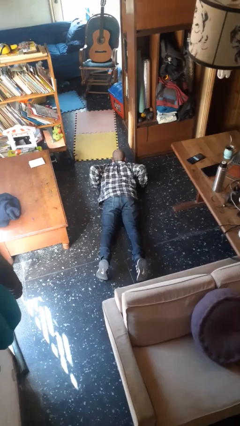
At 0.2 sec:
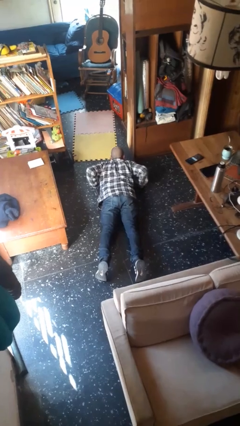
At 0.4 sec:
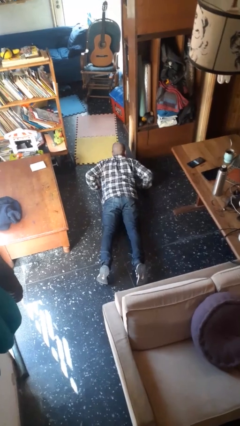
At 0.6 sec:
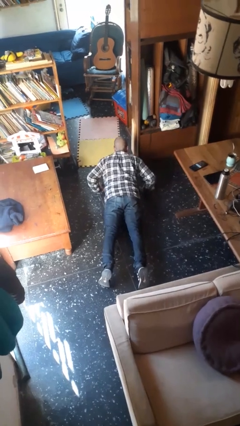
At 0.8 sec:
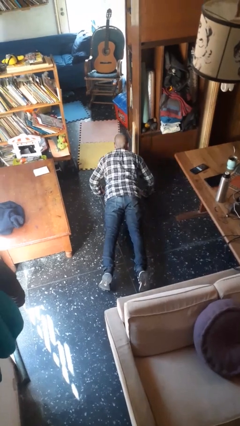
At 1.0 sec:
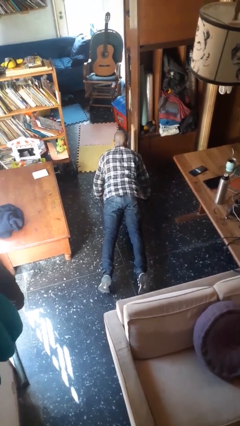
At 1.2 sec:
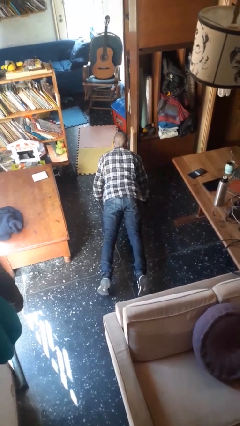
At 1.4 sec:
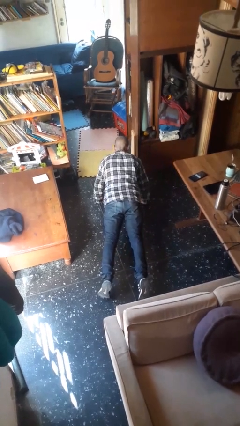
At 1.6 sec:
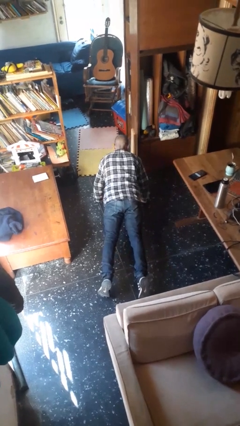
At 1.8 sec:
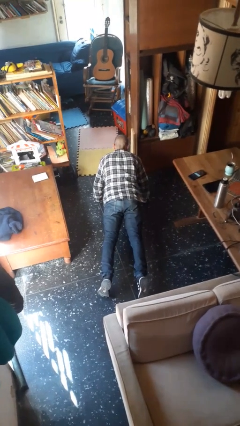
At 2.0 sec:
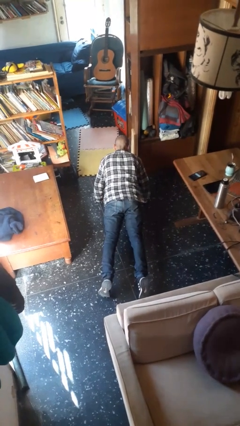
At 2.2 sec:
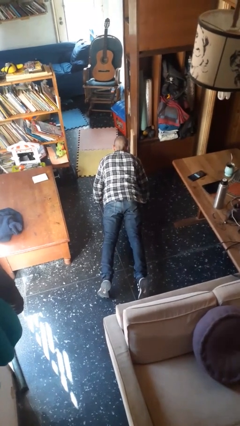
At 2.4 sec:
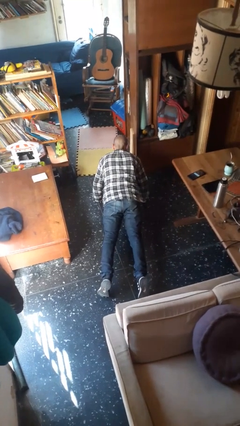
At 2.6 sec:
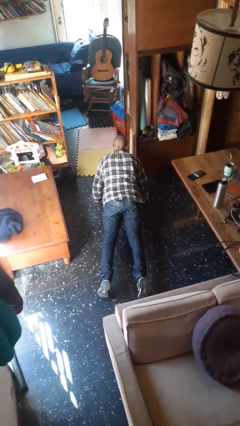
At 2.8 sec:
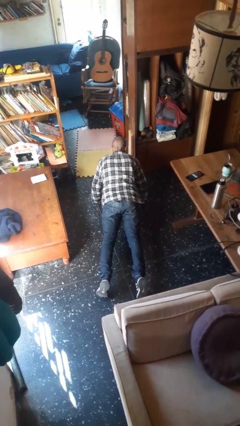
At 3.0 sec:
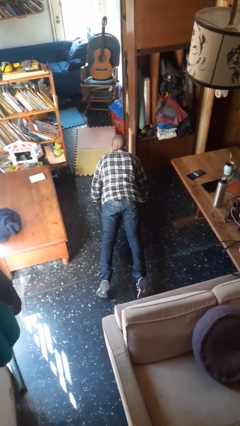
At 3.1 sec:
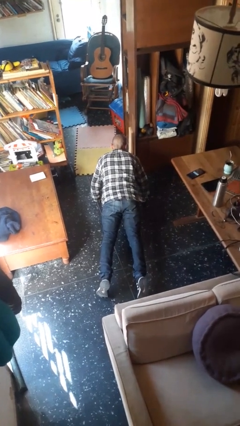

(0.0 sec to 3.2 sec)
person exercises with pushup

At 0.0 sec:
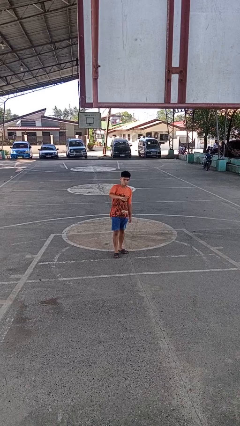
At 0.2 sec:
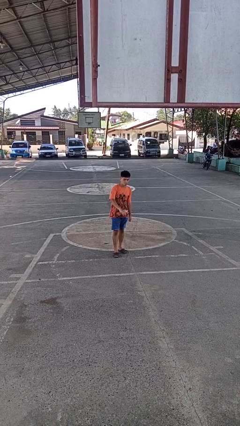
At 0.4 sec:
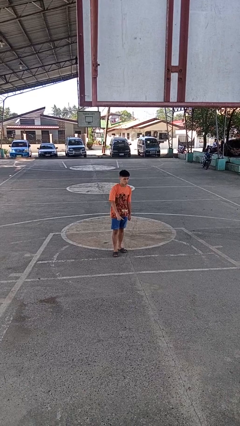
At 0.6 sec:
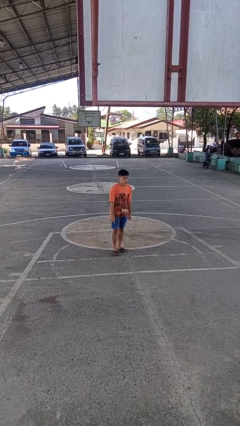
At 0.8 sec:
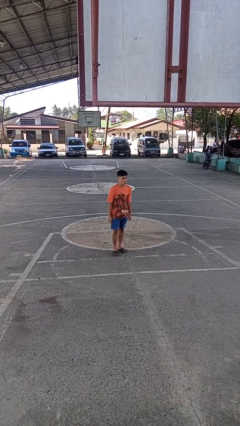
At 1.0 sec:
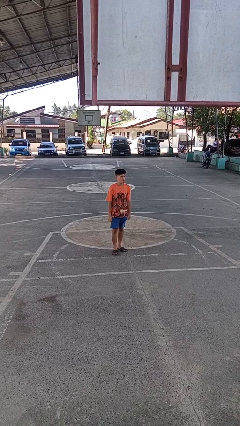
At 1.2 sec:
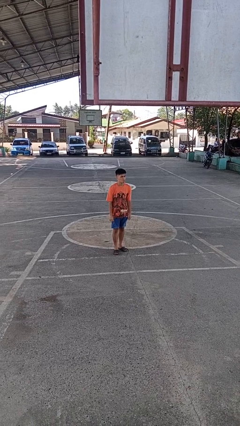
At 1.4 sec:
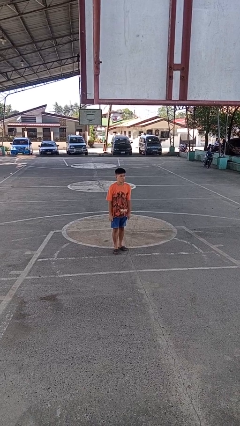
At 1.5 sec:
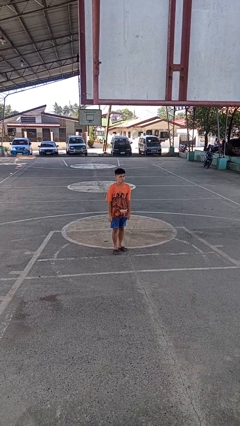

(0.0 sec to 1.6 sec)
person gestures swipe down

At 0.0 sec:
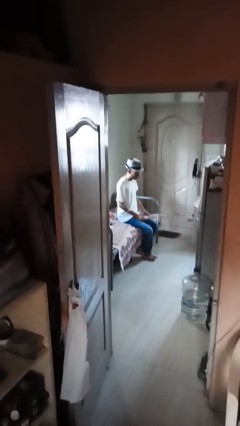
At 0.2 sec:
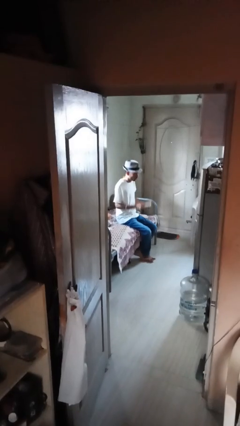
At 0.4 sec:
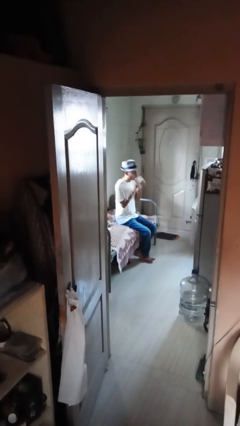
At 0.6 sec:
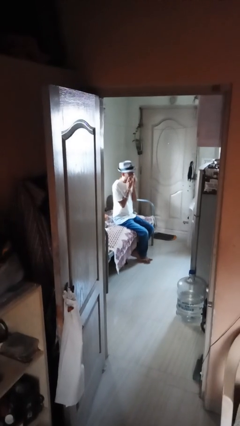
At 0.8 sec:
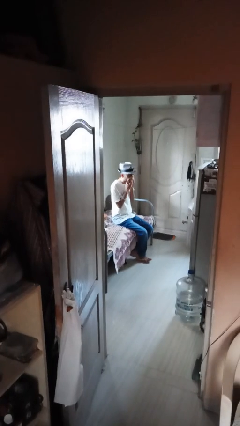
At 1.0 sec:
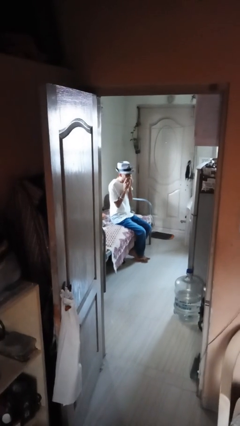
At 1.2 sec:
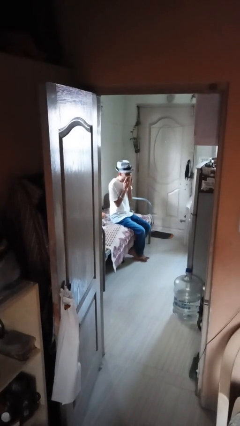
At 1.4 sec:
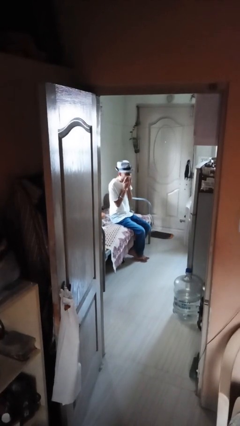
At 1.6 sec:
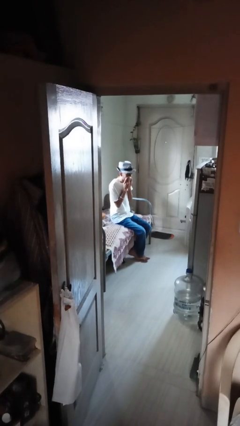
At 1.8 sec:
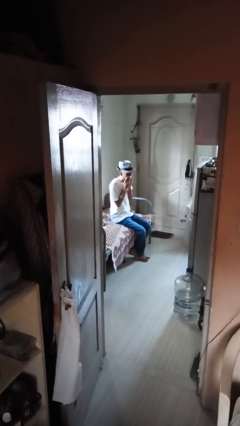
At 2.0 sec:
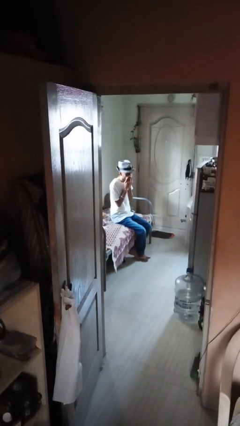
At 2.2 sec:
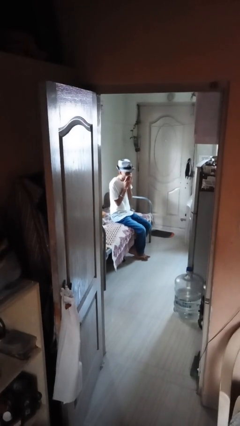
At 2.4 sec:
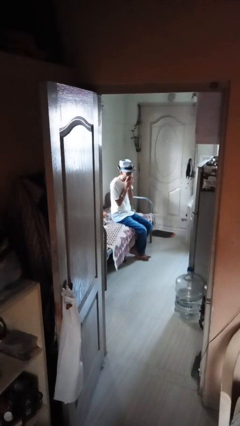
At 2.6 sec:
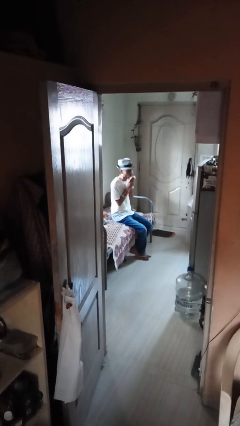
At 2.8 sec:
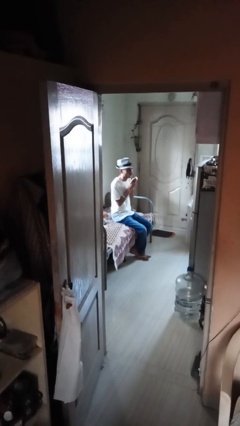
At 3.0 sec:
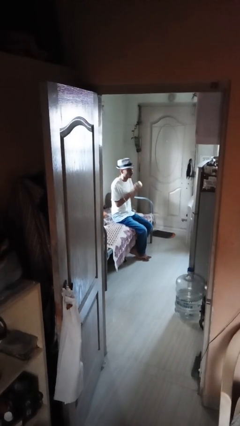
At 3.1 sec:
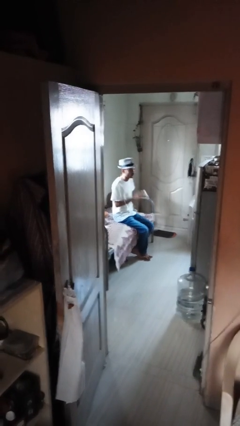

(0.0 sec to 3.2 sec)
person blows nose

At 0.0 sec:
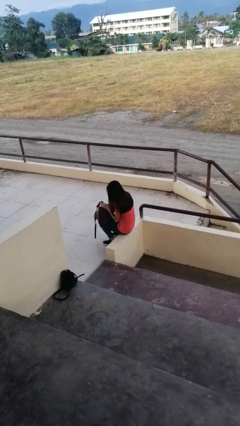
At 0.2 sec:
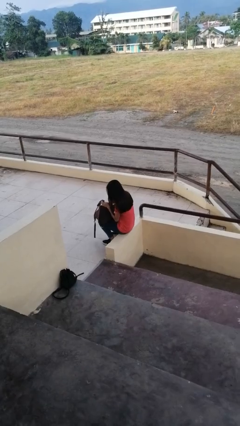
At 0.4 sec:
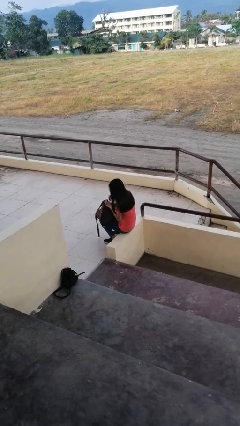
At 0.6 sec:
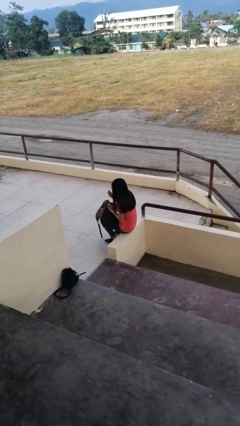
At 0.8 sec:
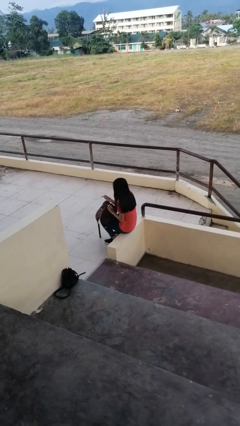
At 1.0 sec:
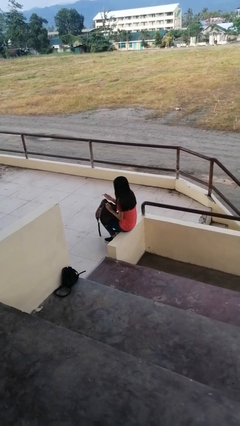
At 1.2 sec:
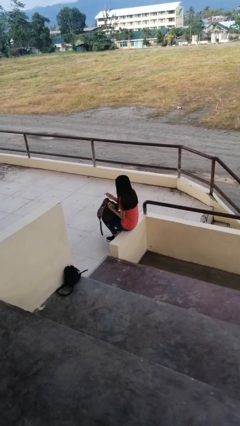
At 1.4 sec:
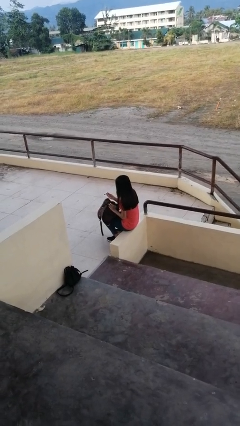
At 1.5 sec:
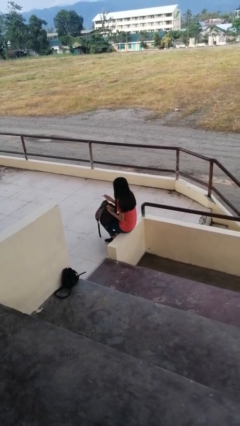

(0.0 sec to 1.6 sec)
person takes object from backpack

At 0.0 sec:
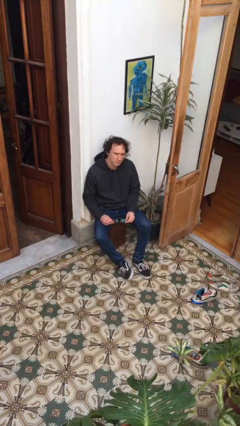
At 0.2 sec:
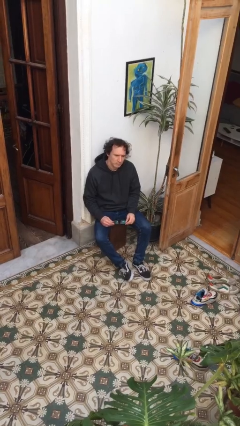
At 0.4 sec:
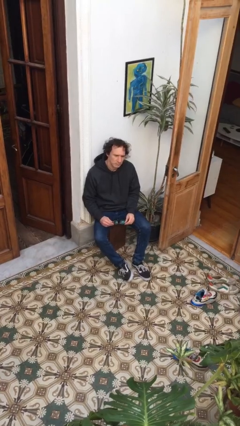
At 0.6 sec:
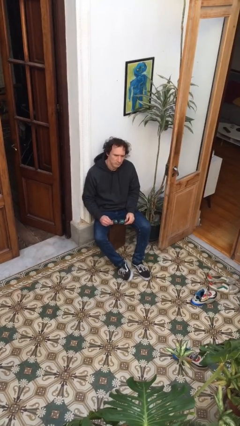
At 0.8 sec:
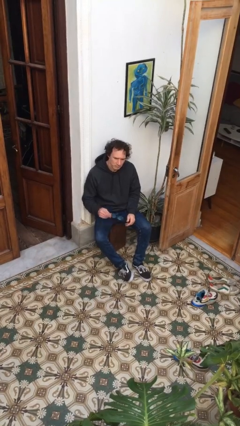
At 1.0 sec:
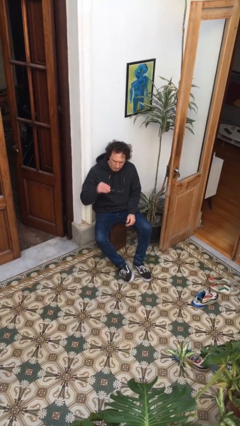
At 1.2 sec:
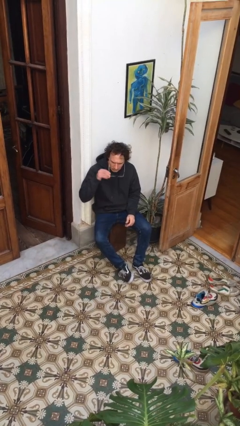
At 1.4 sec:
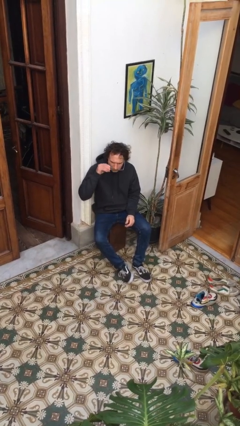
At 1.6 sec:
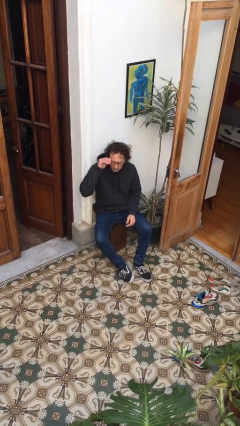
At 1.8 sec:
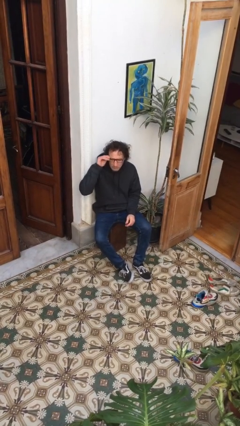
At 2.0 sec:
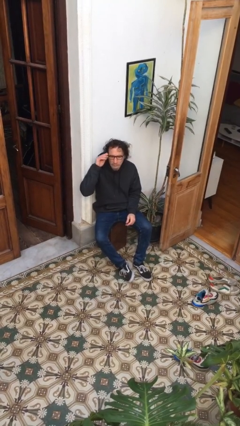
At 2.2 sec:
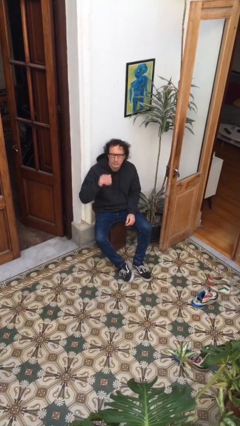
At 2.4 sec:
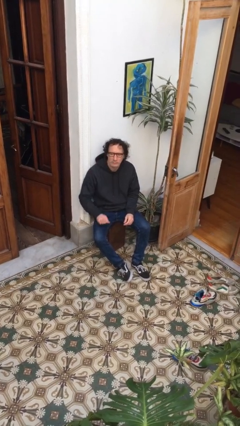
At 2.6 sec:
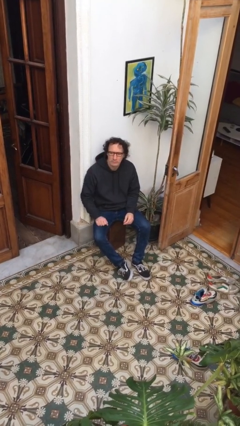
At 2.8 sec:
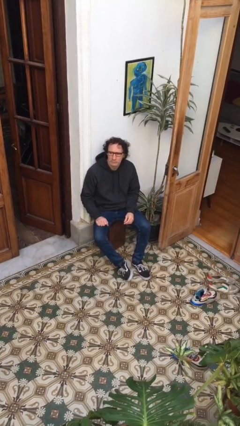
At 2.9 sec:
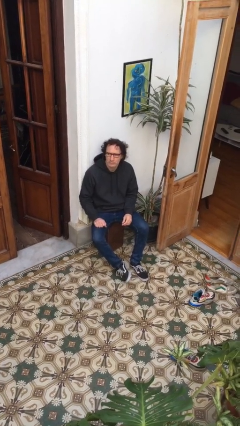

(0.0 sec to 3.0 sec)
person puts on glasses

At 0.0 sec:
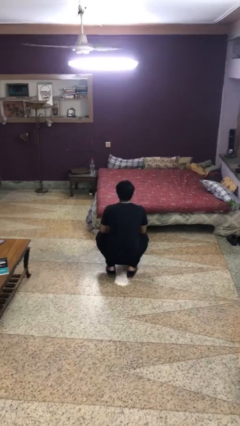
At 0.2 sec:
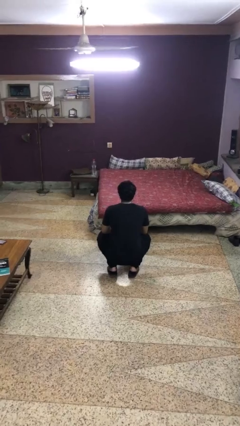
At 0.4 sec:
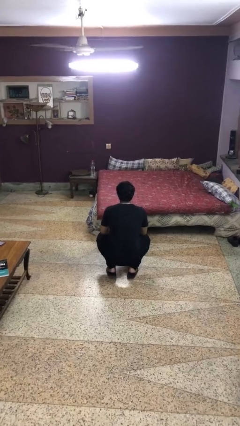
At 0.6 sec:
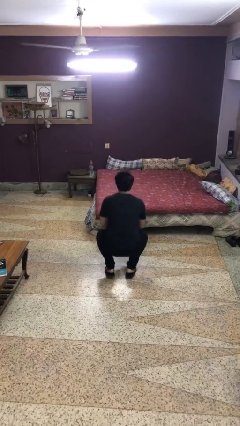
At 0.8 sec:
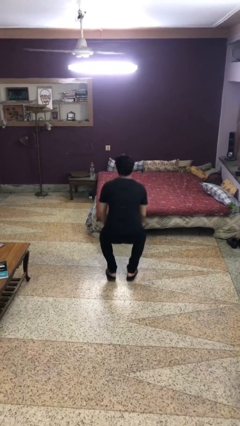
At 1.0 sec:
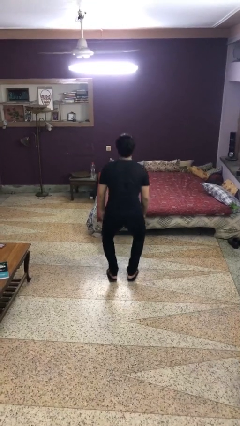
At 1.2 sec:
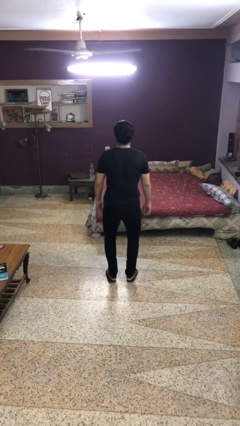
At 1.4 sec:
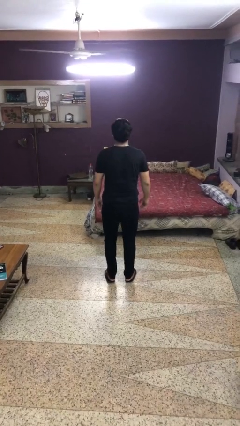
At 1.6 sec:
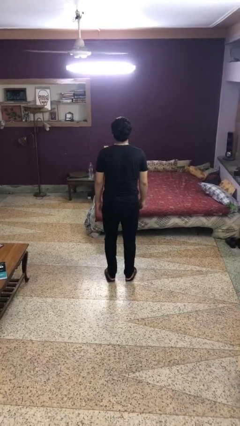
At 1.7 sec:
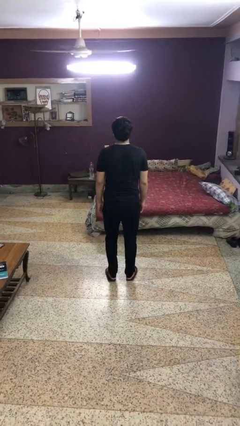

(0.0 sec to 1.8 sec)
person exercises with situp

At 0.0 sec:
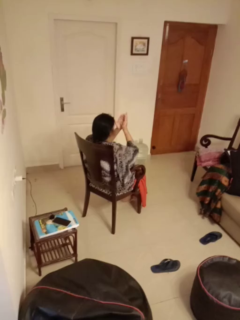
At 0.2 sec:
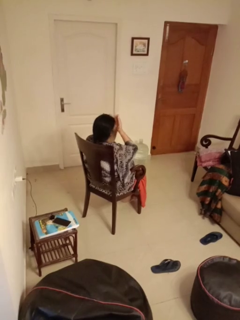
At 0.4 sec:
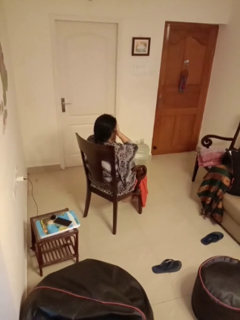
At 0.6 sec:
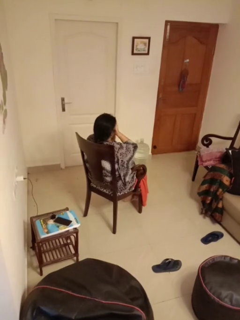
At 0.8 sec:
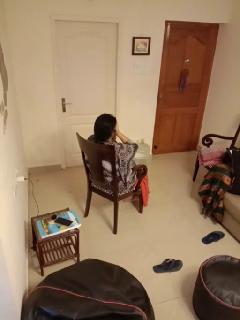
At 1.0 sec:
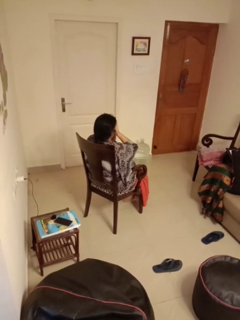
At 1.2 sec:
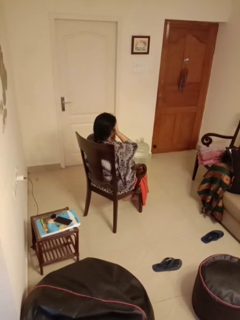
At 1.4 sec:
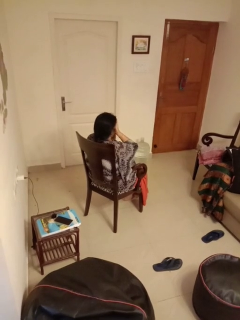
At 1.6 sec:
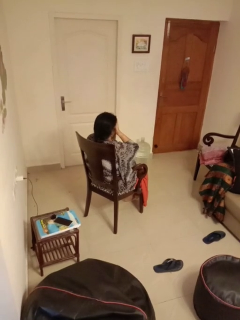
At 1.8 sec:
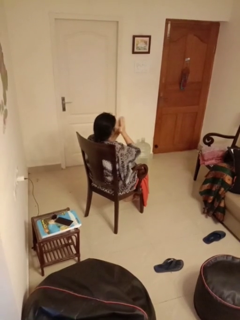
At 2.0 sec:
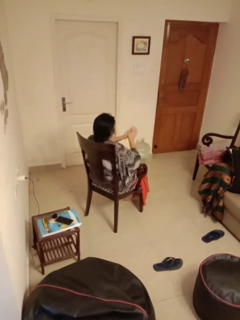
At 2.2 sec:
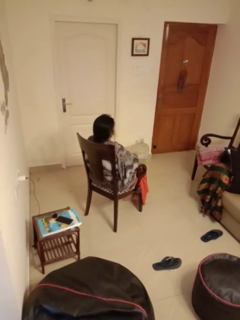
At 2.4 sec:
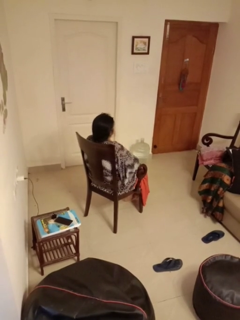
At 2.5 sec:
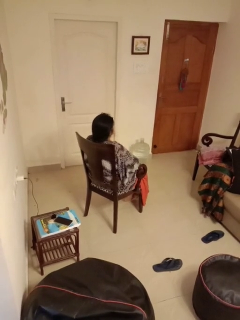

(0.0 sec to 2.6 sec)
person covers face with hands

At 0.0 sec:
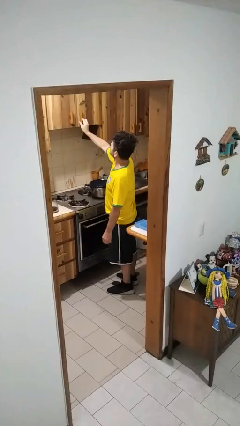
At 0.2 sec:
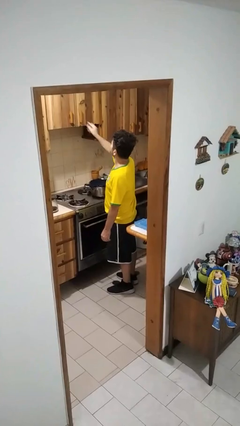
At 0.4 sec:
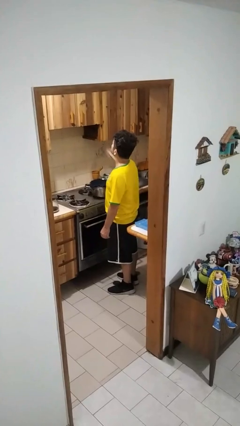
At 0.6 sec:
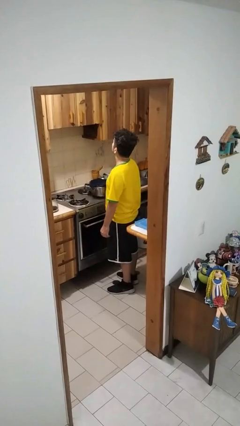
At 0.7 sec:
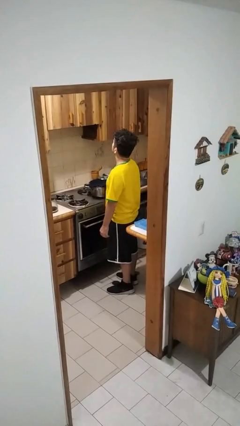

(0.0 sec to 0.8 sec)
person closes cabinet
